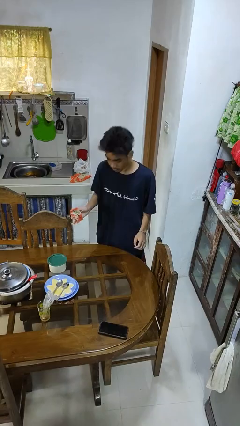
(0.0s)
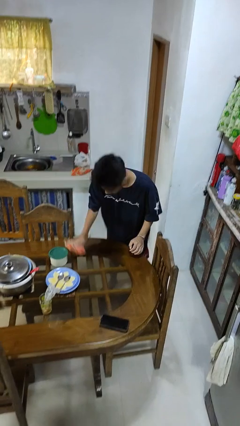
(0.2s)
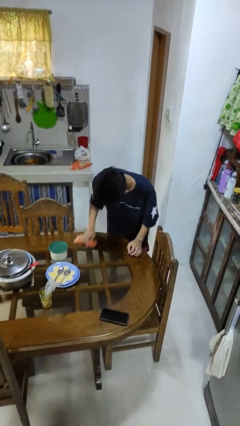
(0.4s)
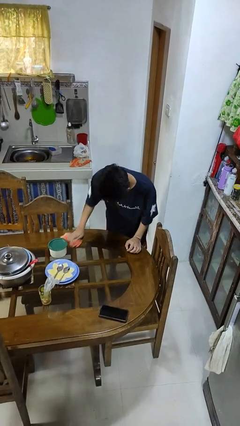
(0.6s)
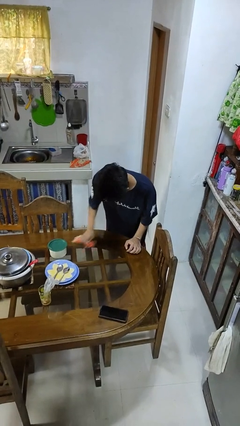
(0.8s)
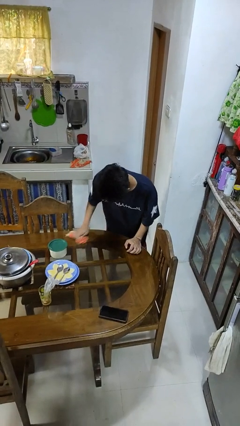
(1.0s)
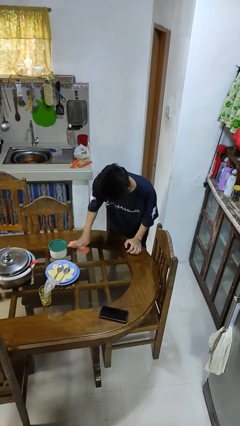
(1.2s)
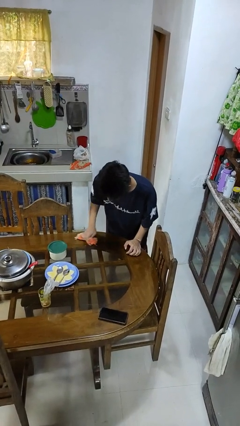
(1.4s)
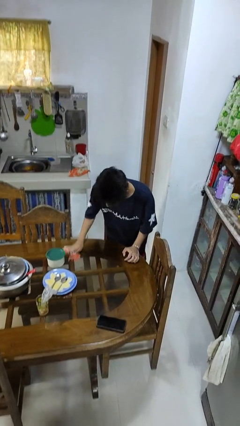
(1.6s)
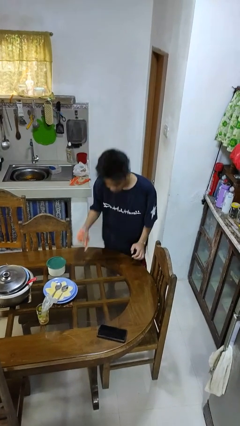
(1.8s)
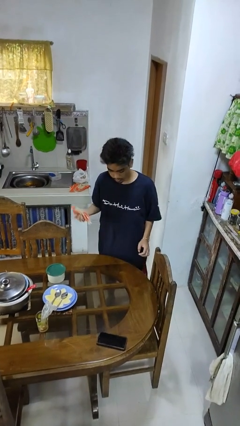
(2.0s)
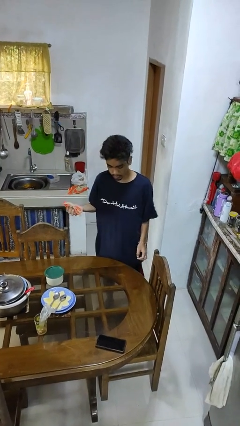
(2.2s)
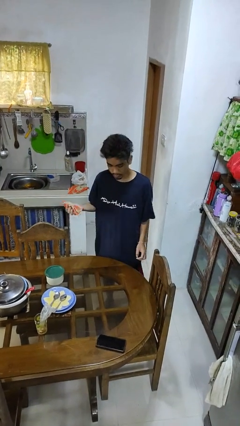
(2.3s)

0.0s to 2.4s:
person cleans table with rag

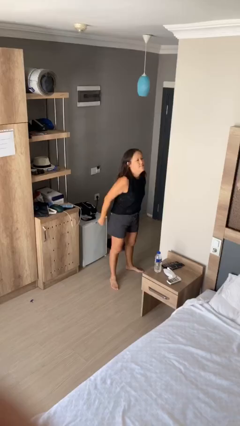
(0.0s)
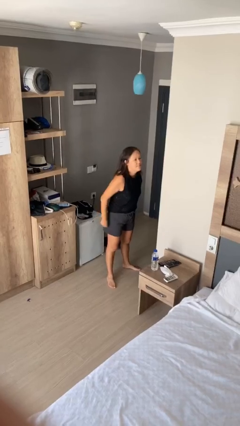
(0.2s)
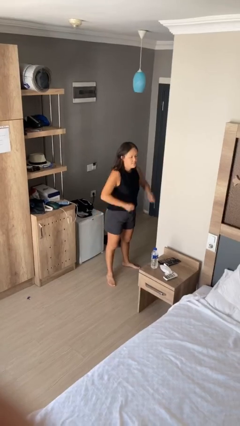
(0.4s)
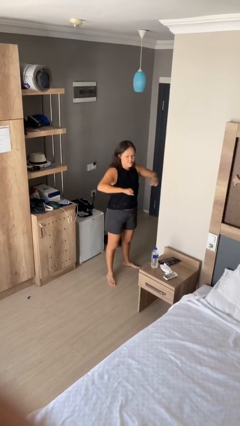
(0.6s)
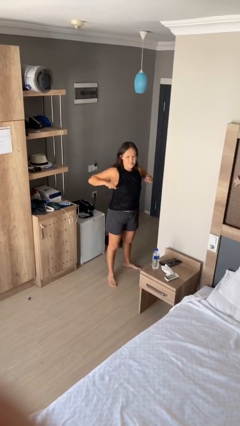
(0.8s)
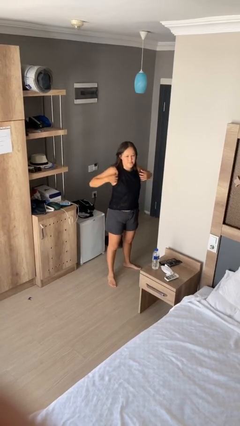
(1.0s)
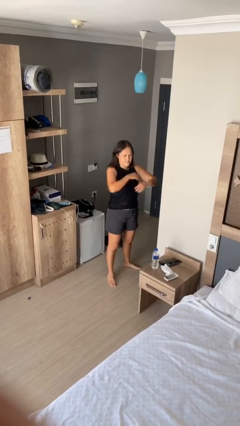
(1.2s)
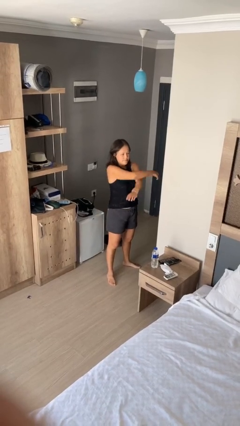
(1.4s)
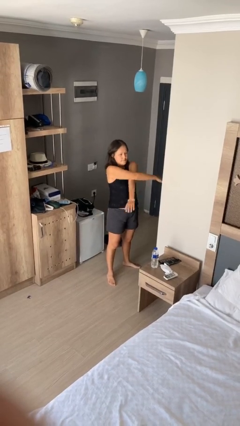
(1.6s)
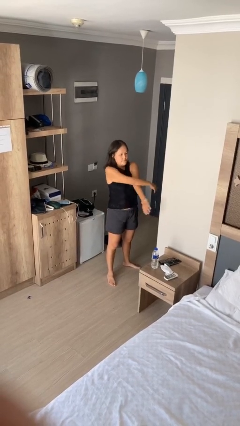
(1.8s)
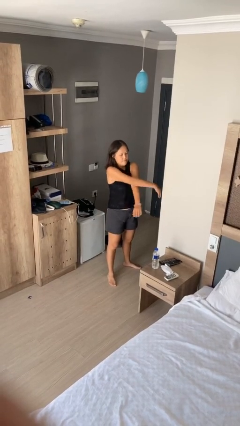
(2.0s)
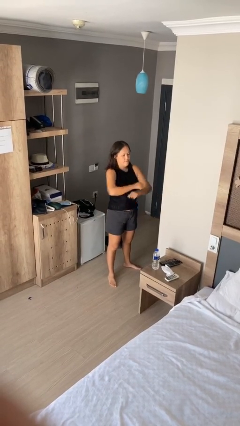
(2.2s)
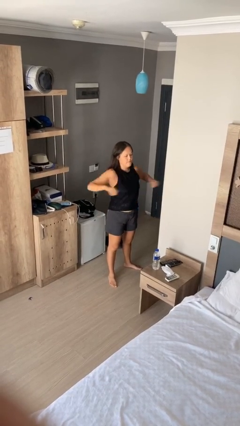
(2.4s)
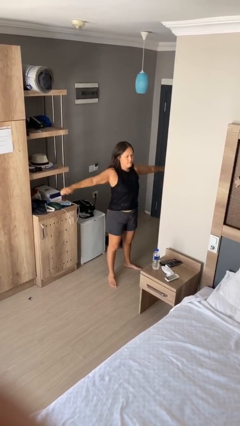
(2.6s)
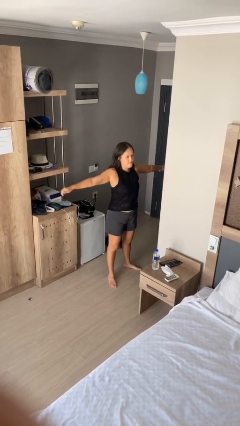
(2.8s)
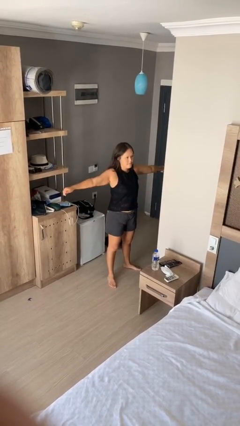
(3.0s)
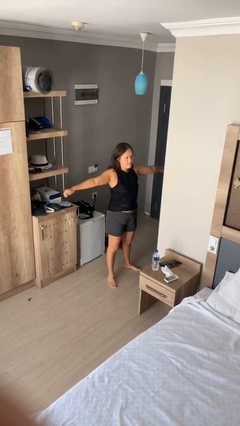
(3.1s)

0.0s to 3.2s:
person stretches arms to side

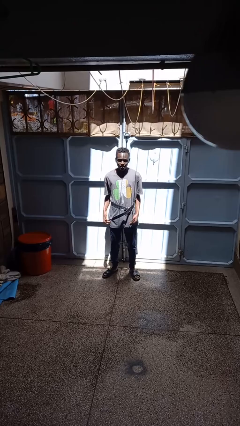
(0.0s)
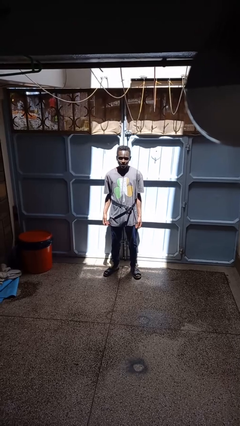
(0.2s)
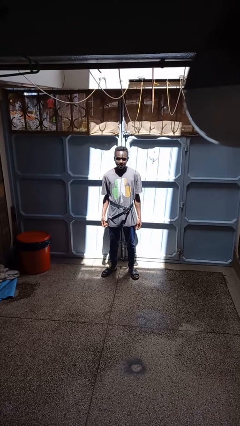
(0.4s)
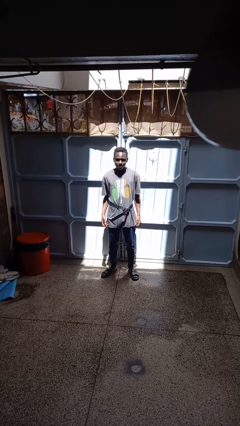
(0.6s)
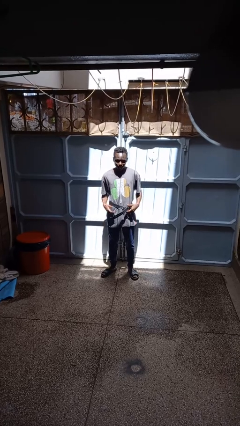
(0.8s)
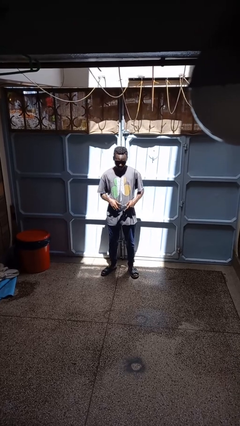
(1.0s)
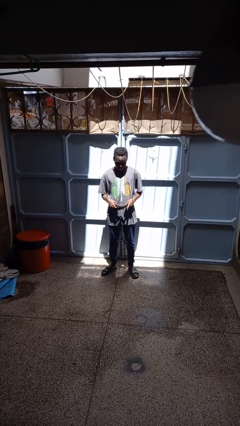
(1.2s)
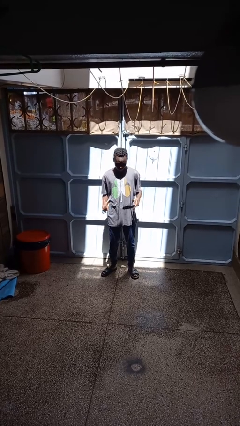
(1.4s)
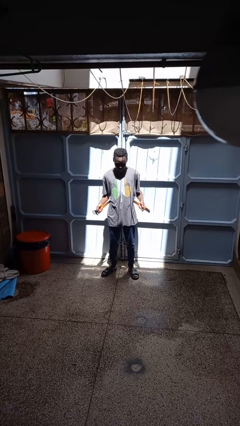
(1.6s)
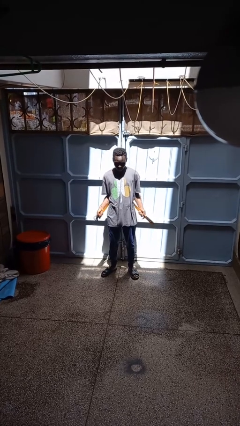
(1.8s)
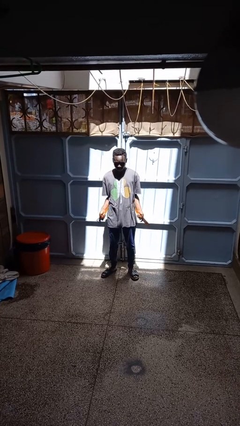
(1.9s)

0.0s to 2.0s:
person takes off belt

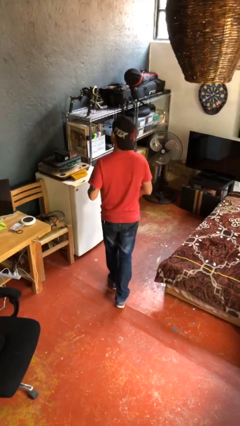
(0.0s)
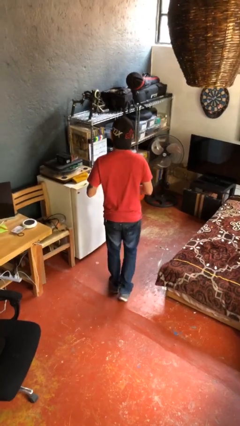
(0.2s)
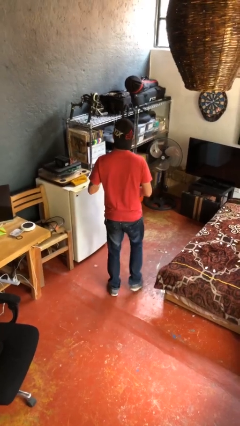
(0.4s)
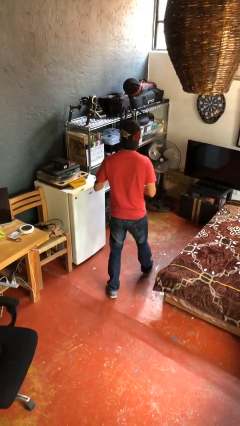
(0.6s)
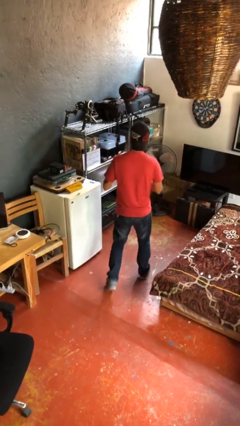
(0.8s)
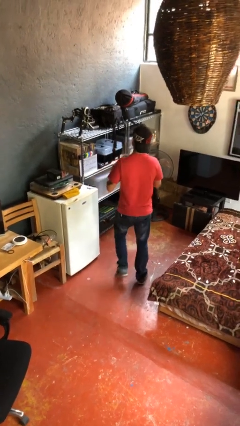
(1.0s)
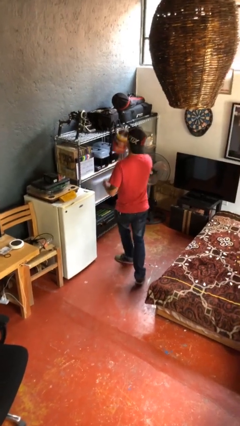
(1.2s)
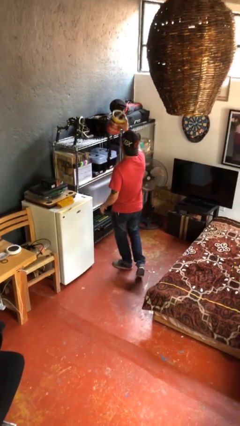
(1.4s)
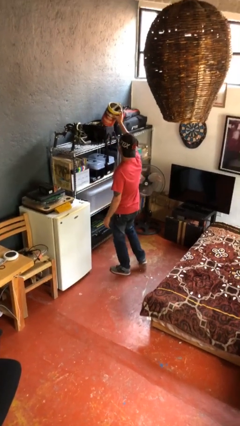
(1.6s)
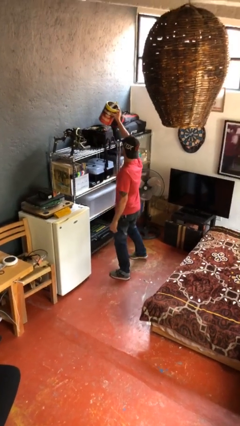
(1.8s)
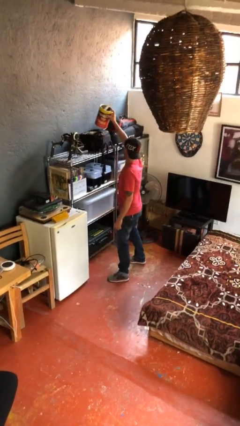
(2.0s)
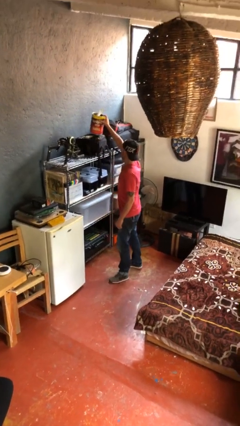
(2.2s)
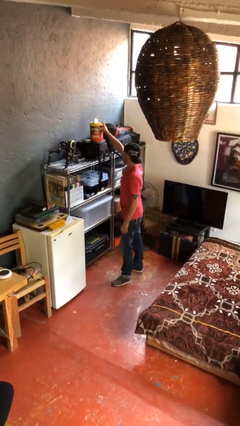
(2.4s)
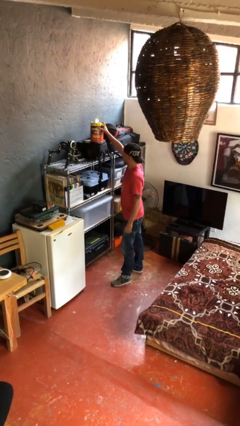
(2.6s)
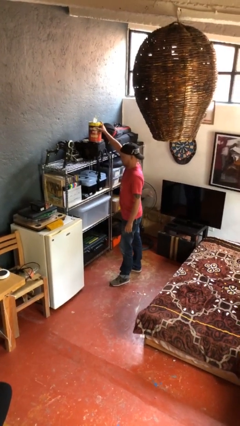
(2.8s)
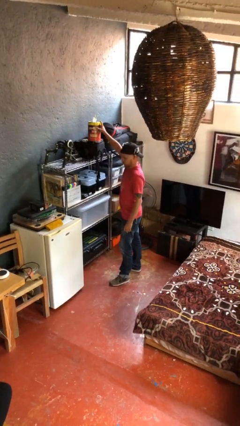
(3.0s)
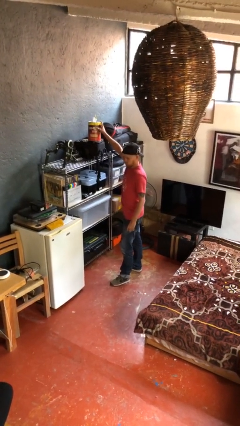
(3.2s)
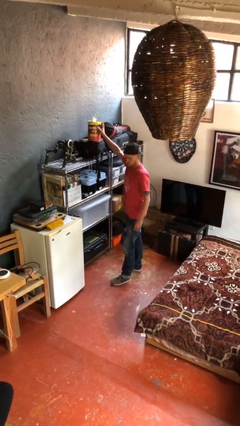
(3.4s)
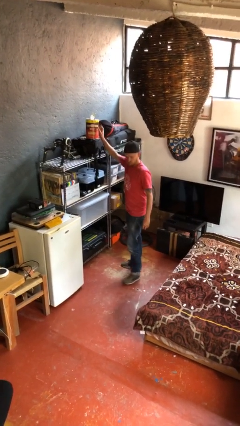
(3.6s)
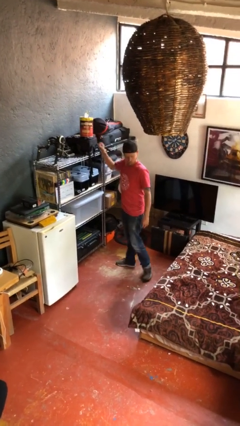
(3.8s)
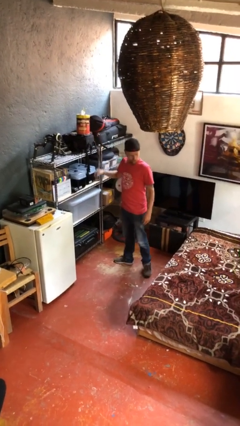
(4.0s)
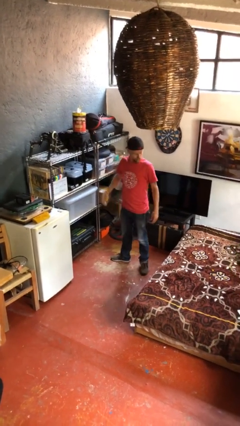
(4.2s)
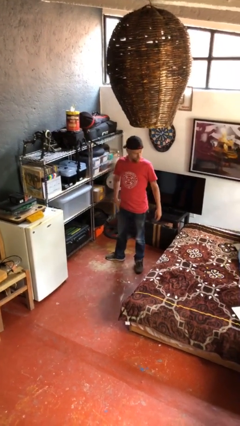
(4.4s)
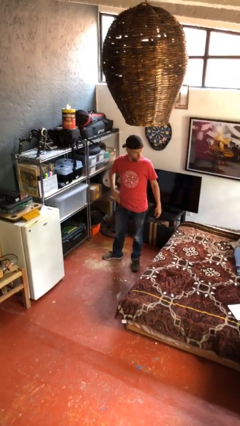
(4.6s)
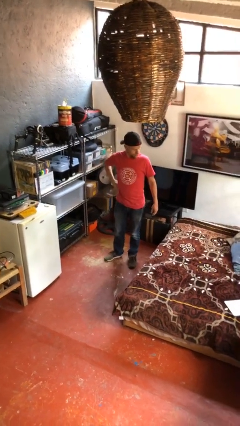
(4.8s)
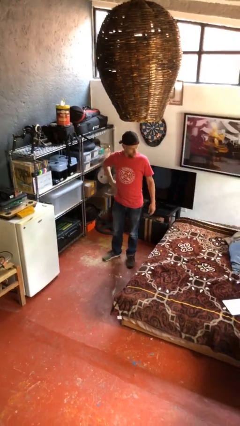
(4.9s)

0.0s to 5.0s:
person puts down object on shelf

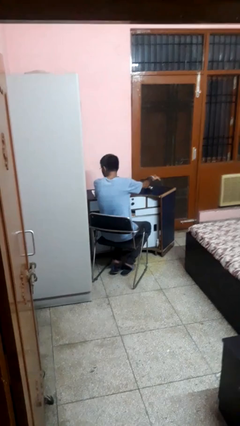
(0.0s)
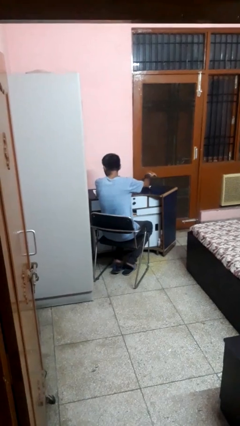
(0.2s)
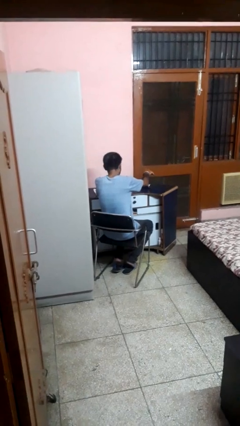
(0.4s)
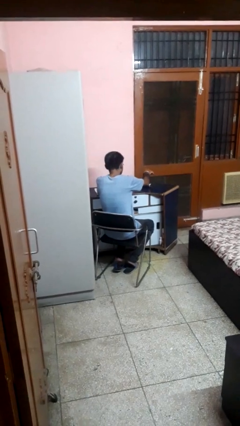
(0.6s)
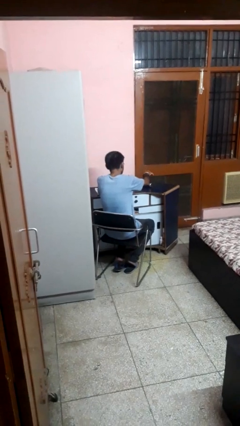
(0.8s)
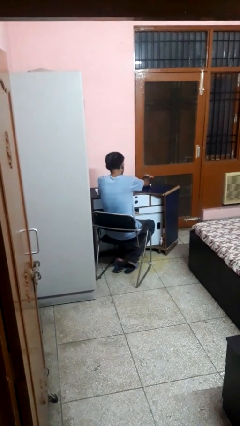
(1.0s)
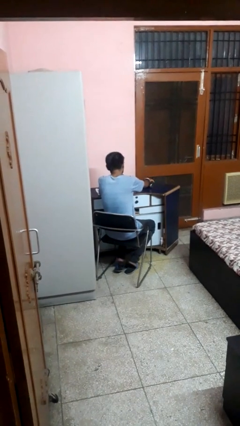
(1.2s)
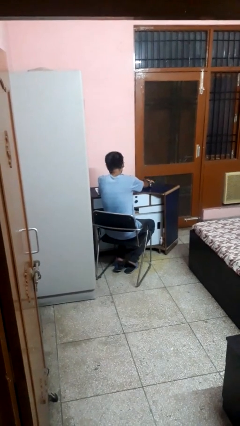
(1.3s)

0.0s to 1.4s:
person knocks over glass

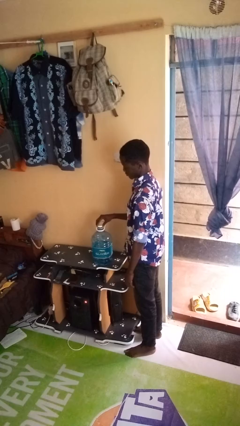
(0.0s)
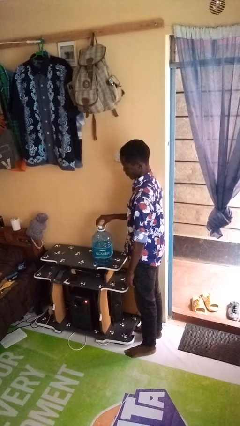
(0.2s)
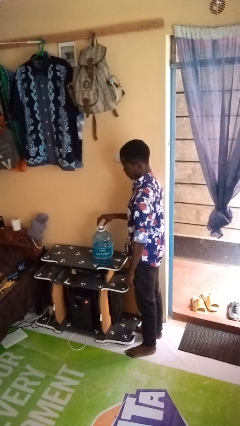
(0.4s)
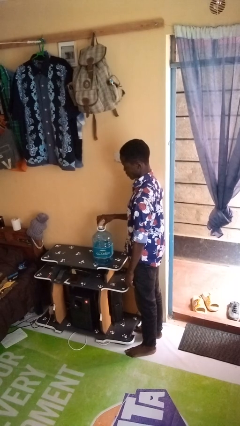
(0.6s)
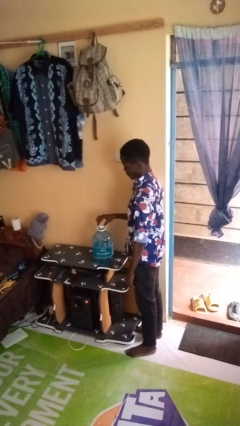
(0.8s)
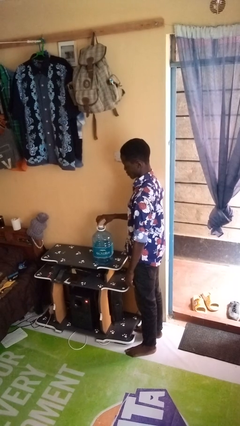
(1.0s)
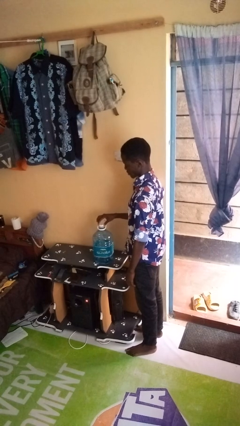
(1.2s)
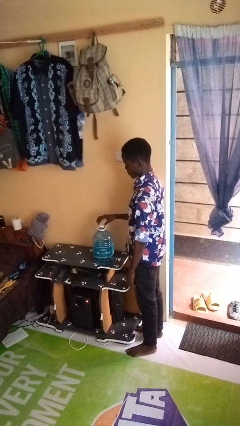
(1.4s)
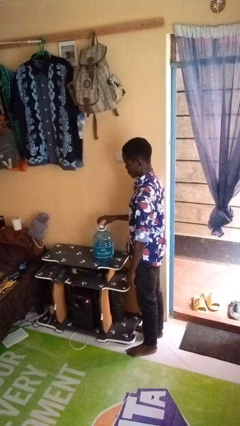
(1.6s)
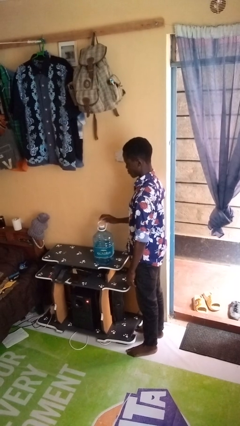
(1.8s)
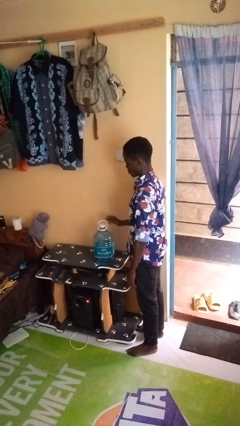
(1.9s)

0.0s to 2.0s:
person screws lid to bottle

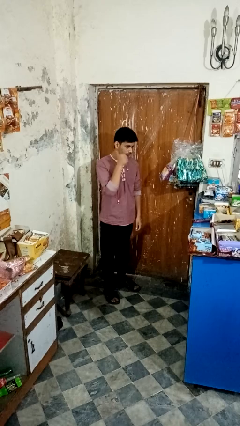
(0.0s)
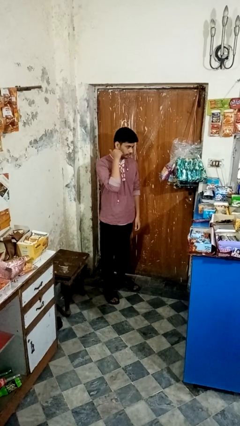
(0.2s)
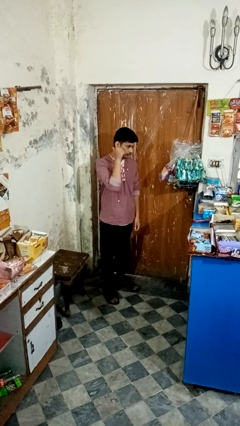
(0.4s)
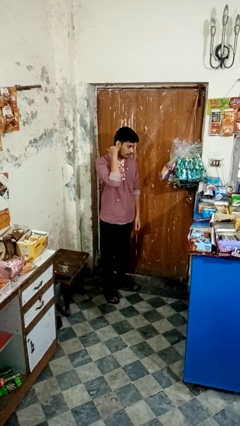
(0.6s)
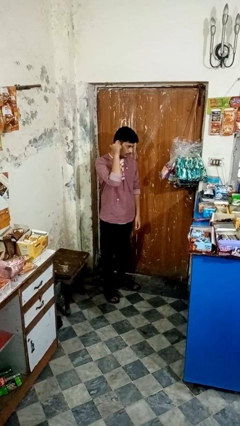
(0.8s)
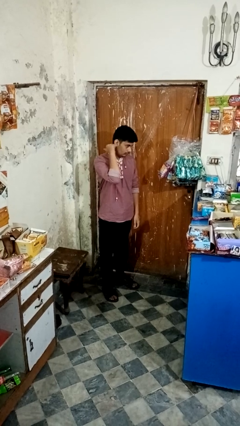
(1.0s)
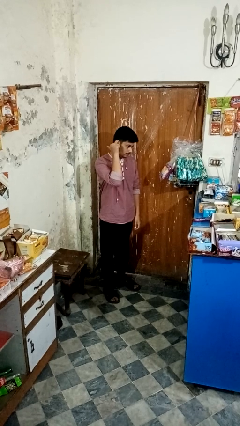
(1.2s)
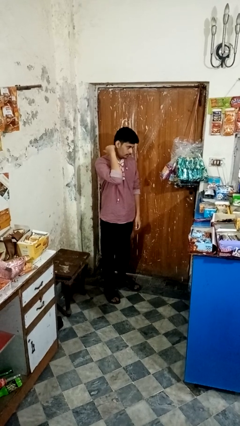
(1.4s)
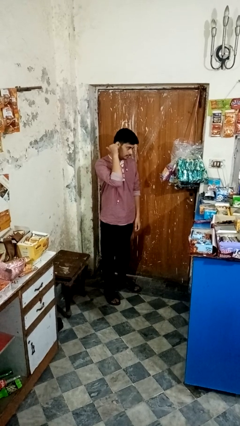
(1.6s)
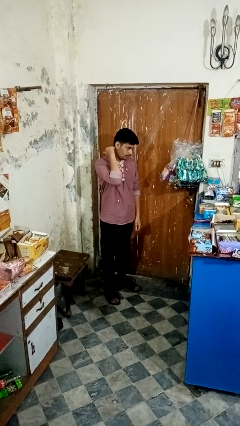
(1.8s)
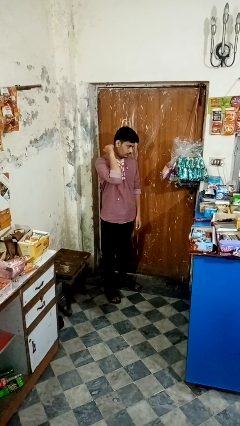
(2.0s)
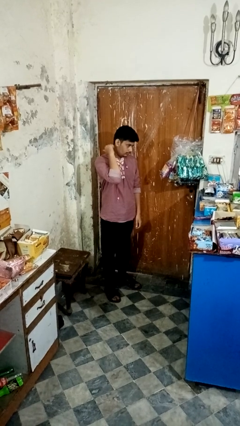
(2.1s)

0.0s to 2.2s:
person gestures behind me
